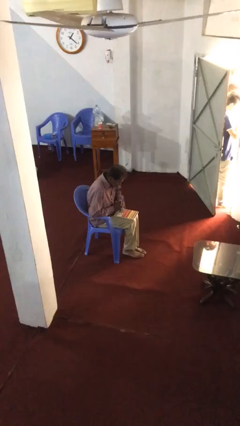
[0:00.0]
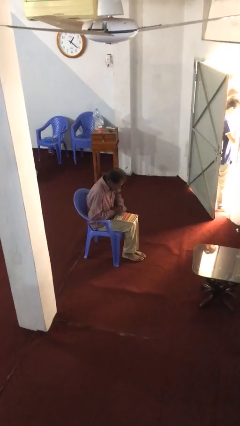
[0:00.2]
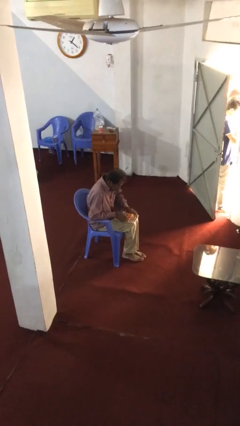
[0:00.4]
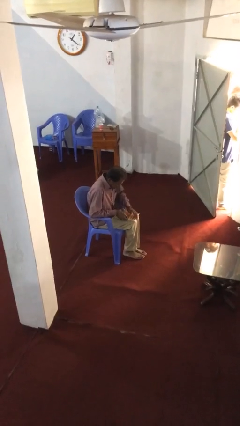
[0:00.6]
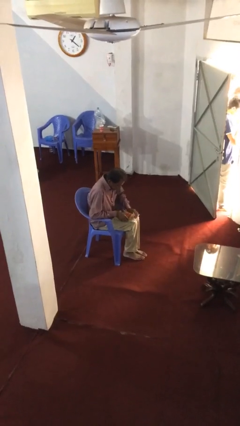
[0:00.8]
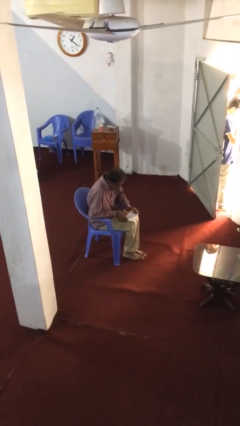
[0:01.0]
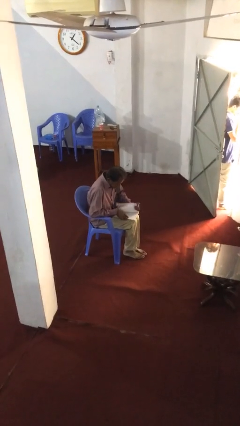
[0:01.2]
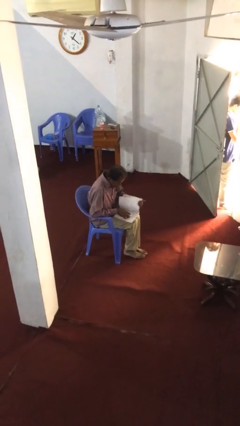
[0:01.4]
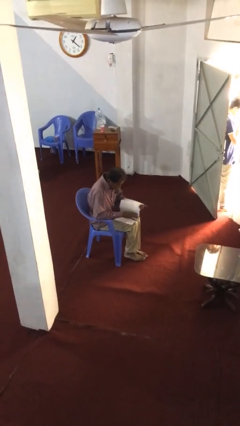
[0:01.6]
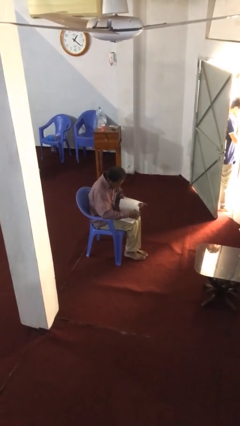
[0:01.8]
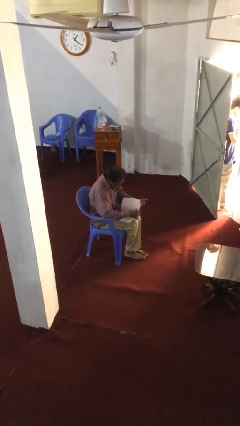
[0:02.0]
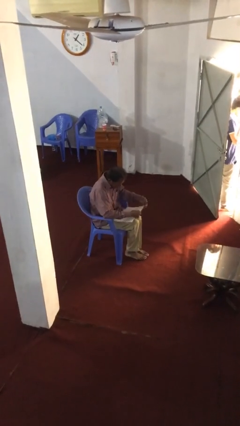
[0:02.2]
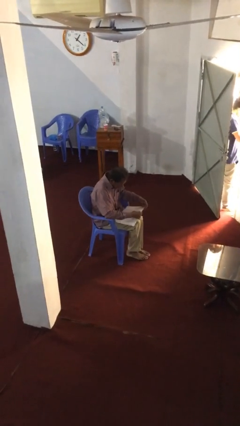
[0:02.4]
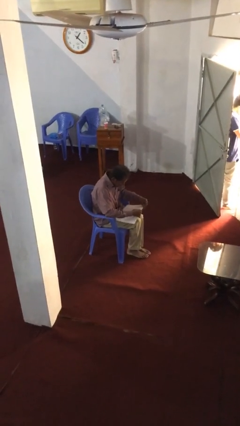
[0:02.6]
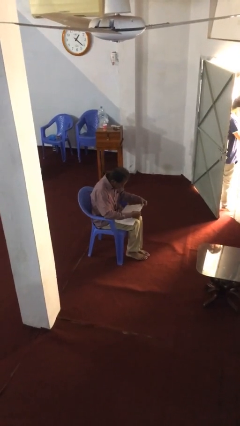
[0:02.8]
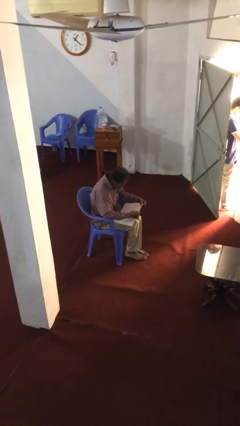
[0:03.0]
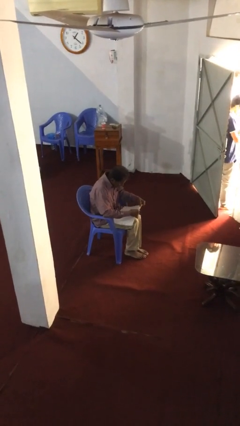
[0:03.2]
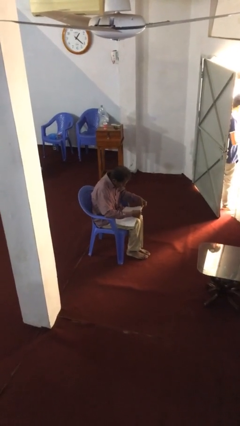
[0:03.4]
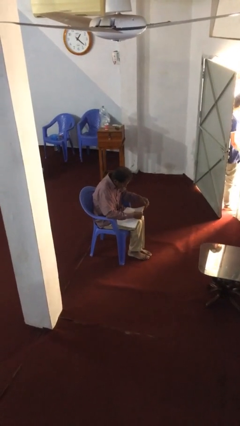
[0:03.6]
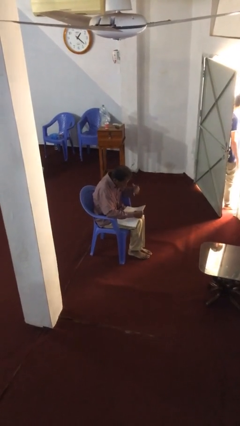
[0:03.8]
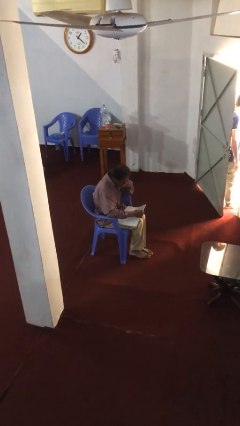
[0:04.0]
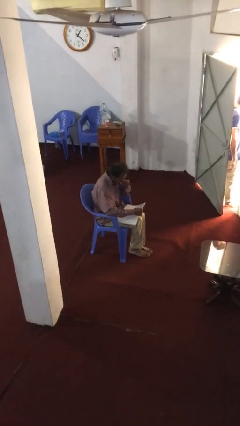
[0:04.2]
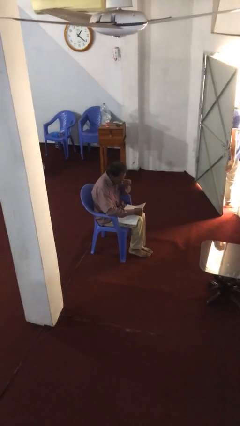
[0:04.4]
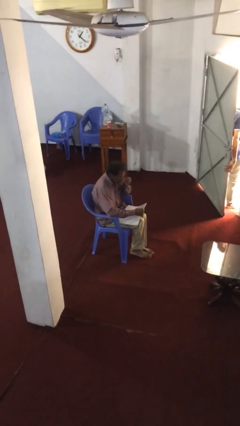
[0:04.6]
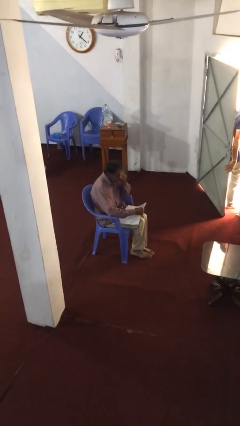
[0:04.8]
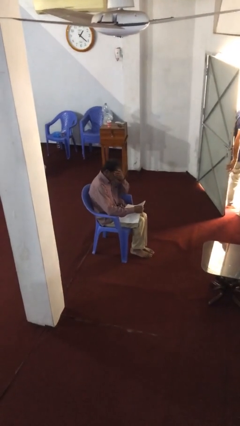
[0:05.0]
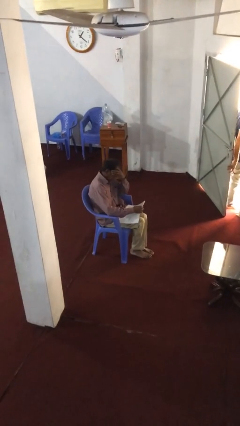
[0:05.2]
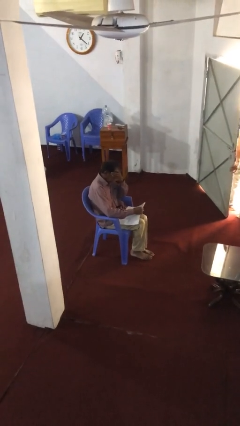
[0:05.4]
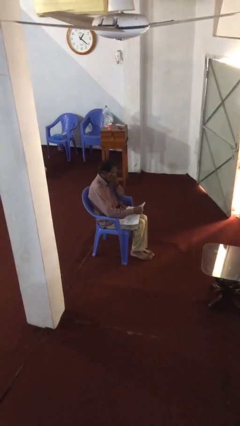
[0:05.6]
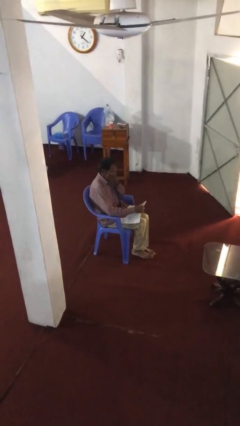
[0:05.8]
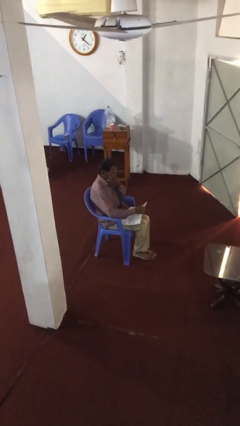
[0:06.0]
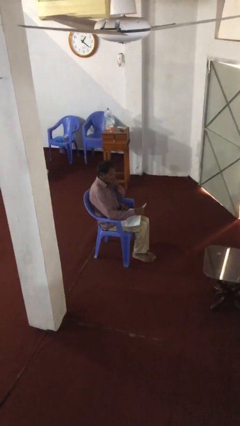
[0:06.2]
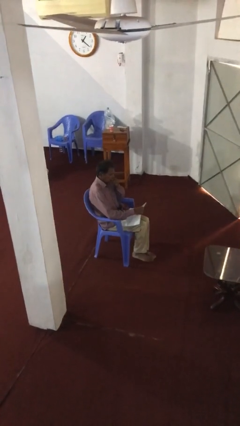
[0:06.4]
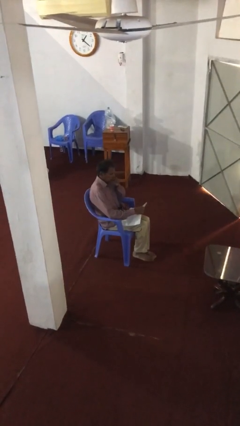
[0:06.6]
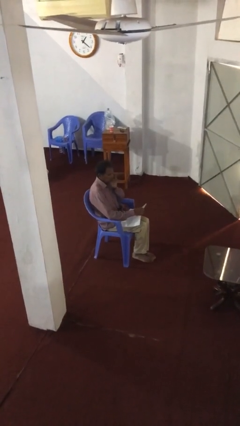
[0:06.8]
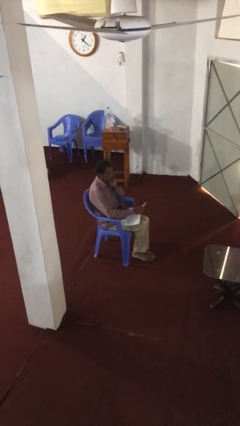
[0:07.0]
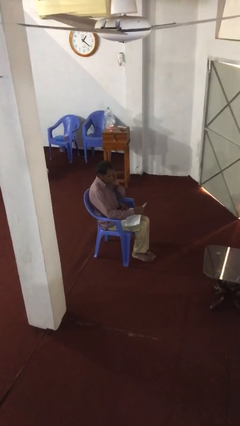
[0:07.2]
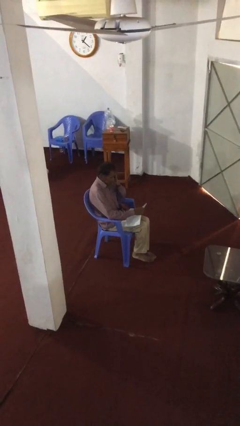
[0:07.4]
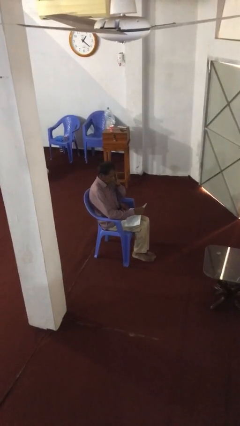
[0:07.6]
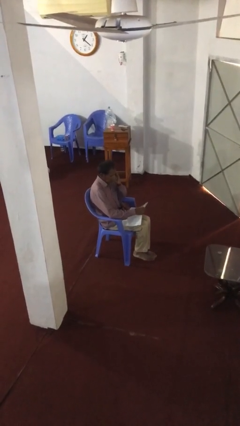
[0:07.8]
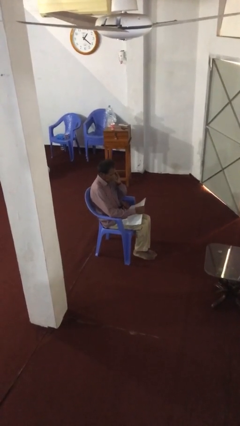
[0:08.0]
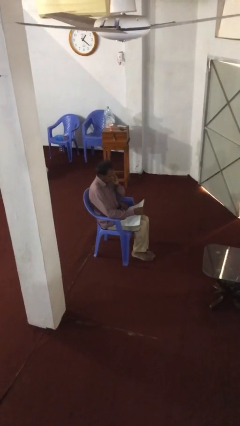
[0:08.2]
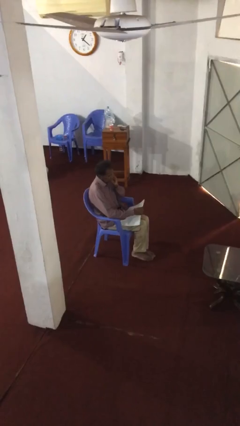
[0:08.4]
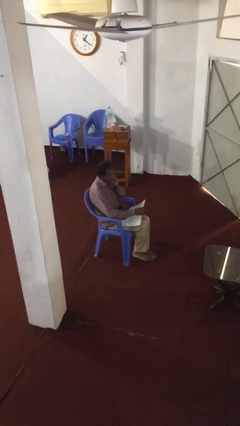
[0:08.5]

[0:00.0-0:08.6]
person reads document

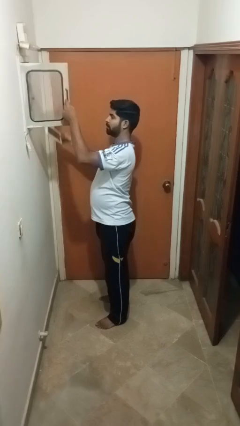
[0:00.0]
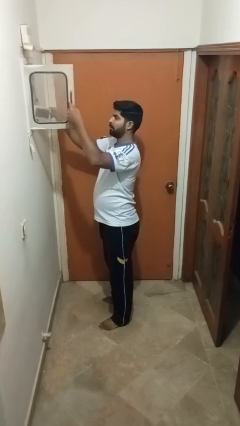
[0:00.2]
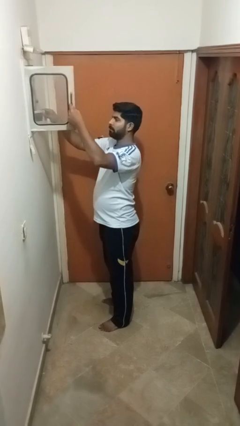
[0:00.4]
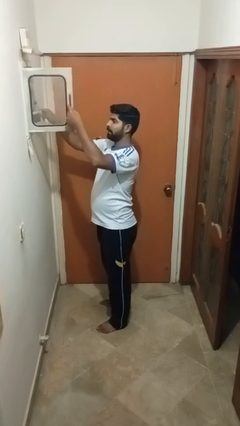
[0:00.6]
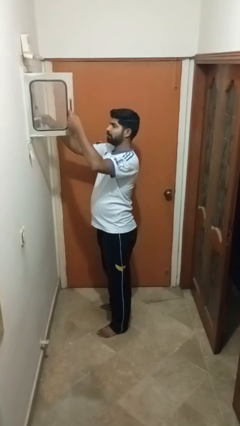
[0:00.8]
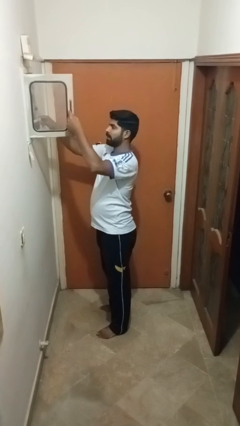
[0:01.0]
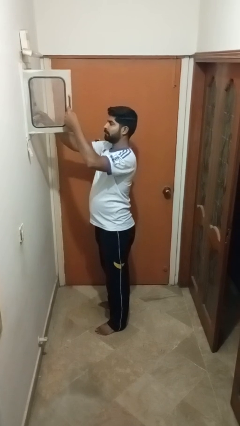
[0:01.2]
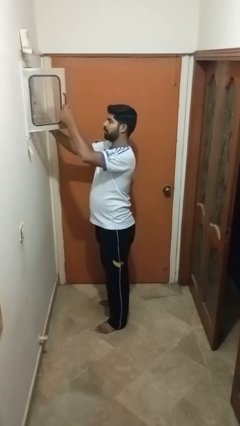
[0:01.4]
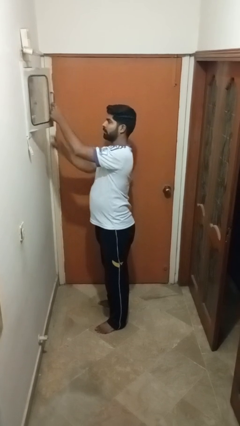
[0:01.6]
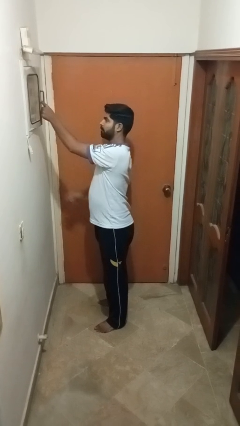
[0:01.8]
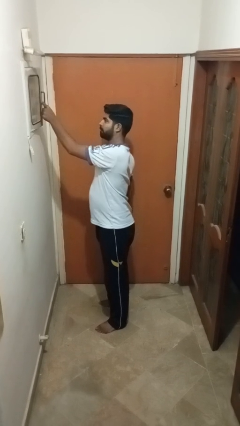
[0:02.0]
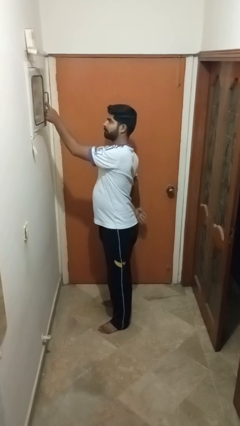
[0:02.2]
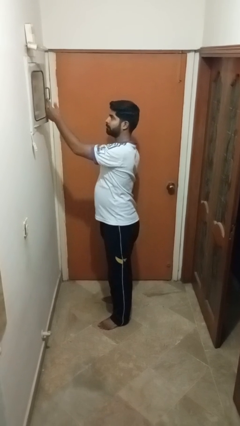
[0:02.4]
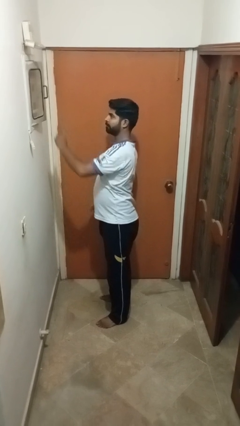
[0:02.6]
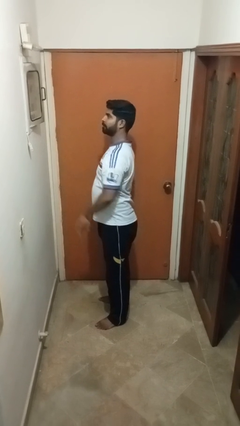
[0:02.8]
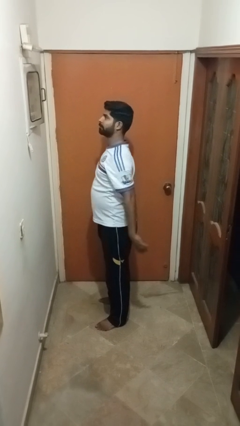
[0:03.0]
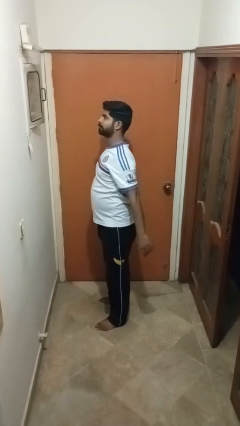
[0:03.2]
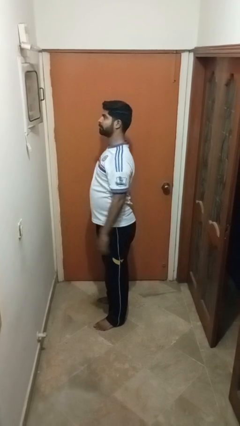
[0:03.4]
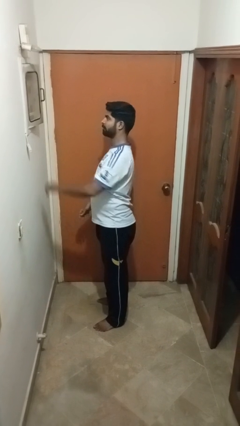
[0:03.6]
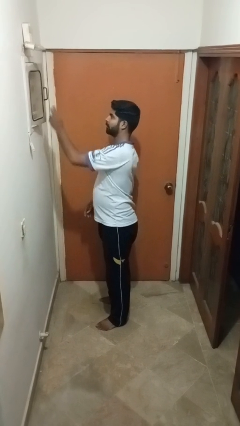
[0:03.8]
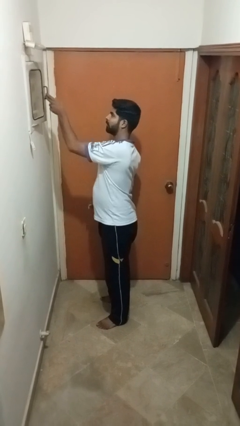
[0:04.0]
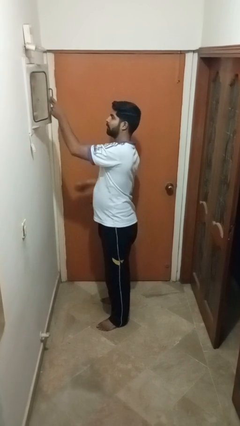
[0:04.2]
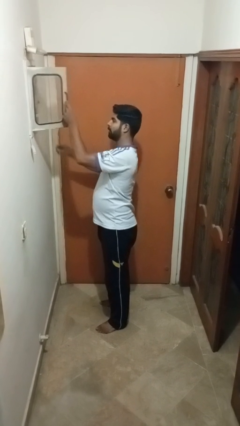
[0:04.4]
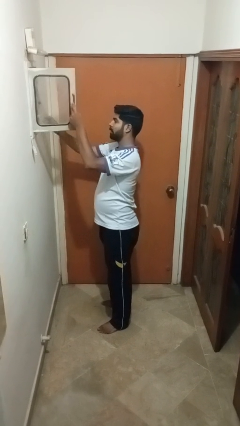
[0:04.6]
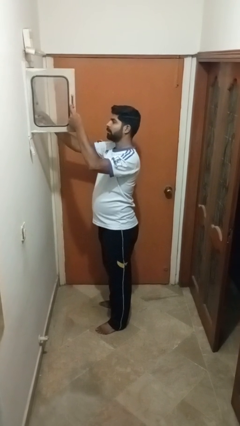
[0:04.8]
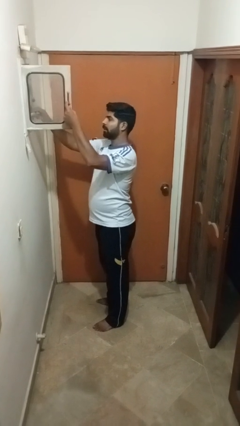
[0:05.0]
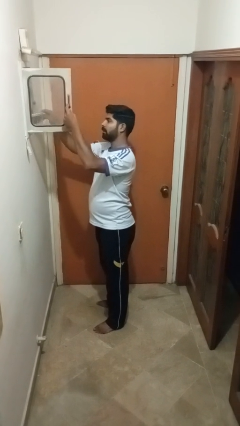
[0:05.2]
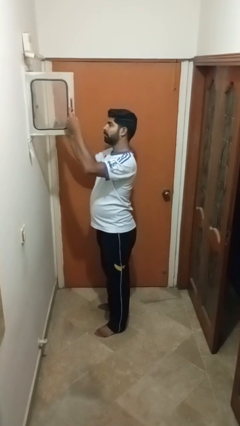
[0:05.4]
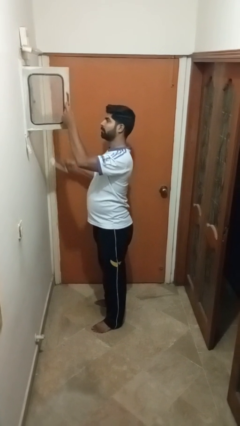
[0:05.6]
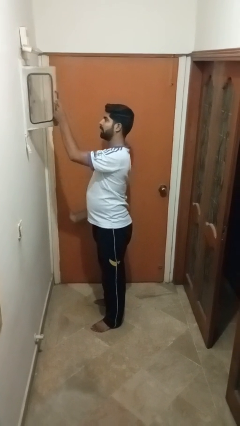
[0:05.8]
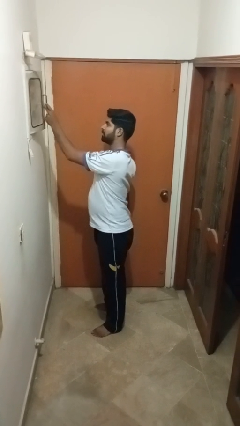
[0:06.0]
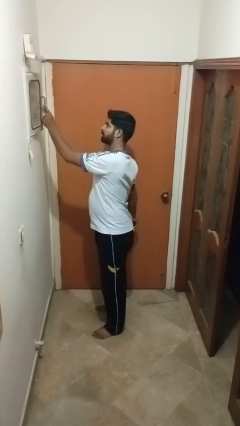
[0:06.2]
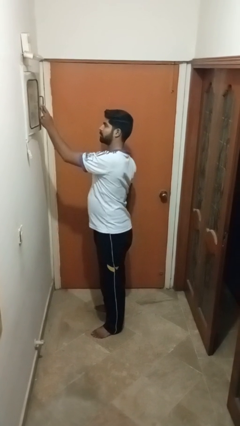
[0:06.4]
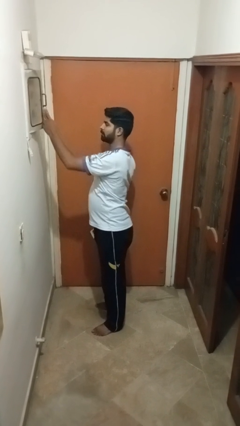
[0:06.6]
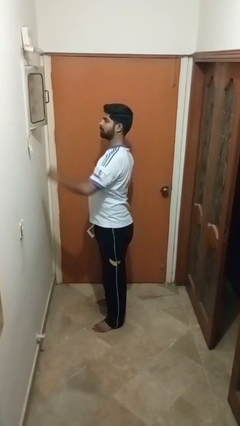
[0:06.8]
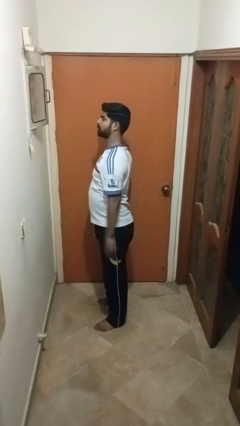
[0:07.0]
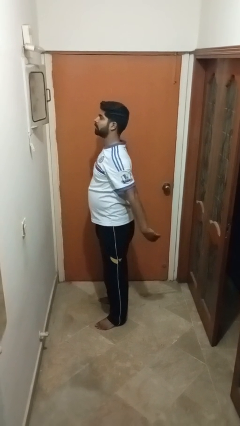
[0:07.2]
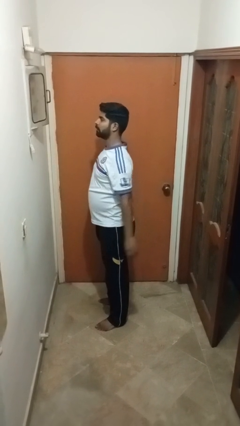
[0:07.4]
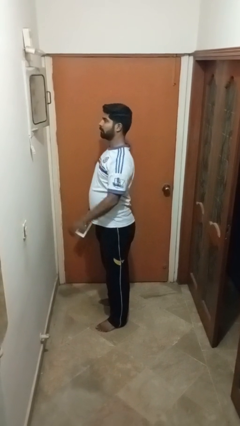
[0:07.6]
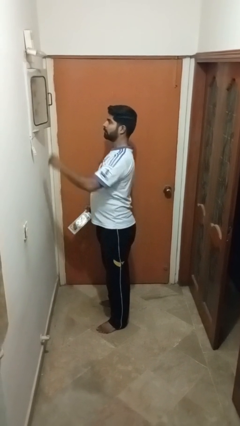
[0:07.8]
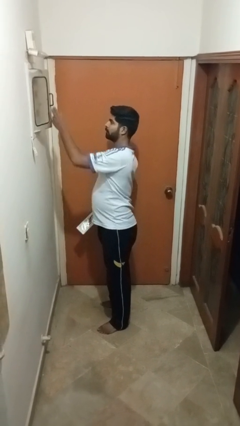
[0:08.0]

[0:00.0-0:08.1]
person puts letters in mailbox

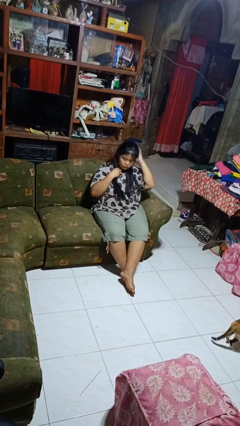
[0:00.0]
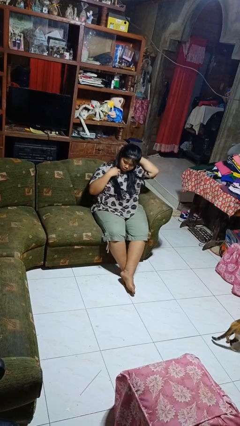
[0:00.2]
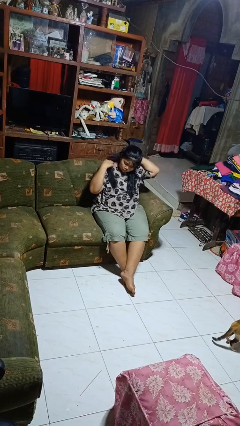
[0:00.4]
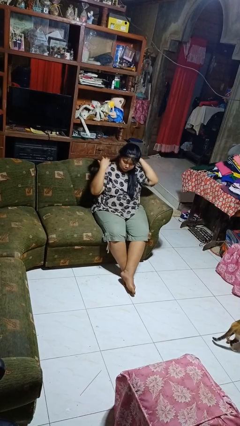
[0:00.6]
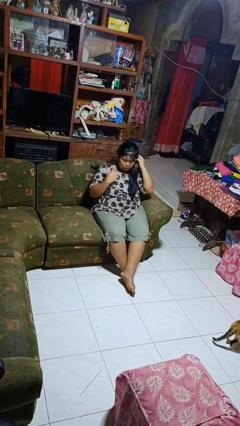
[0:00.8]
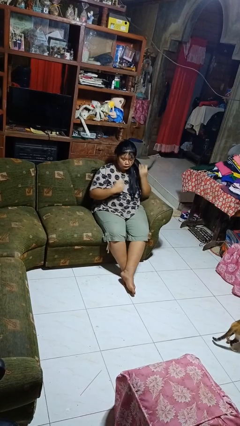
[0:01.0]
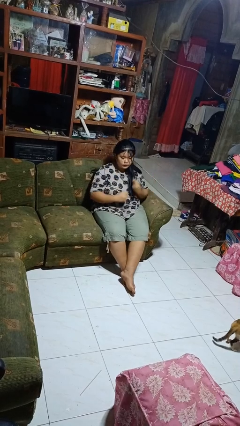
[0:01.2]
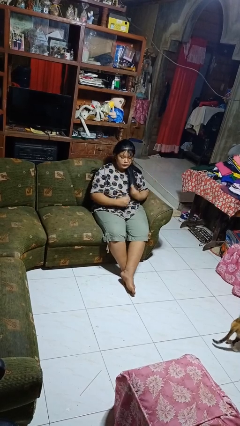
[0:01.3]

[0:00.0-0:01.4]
person strokes hair
